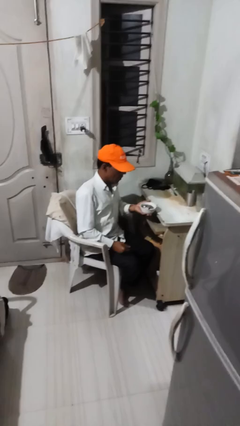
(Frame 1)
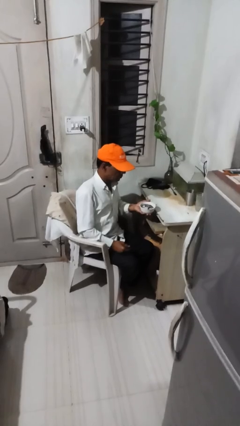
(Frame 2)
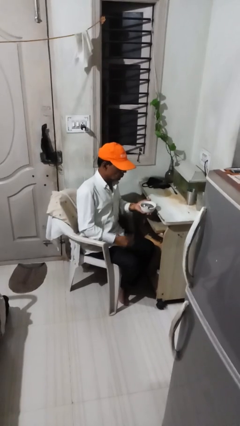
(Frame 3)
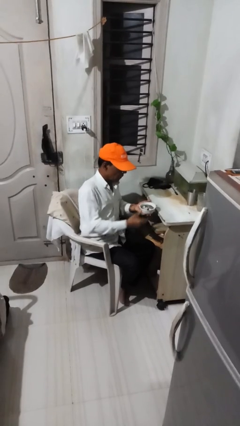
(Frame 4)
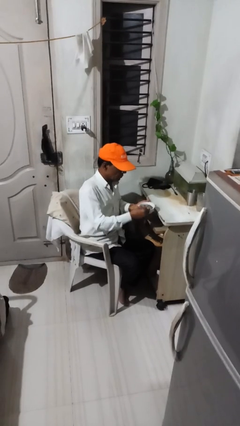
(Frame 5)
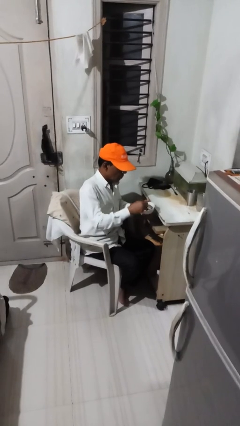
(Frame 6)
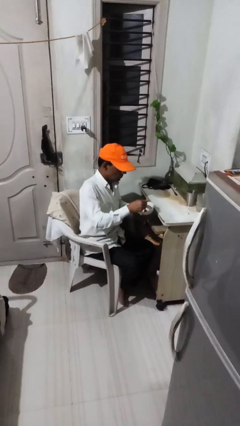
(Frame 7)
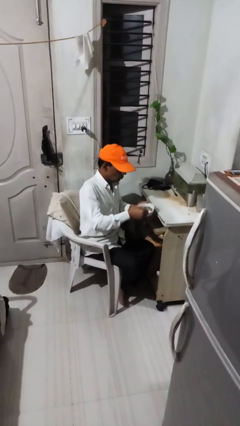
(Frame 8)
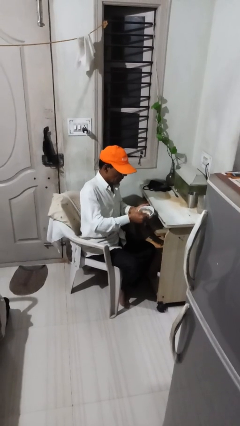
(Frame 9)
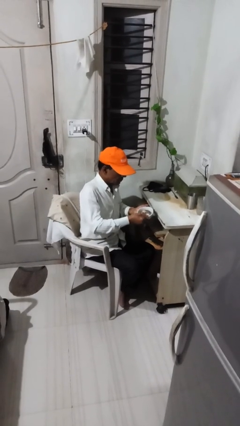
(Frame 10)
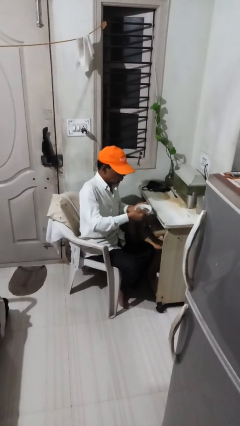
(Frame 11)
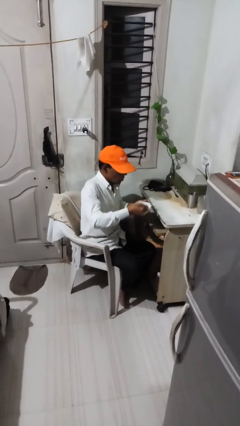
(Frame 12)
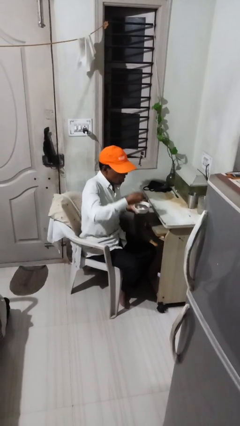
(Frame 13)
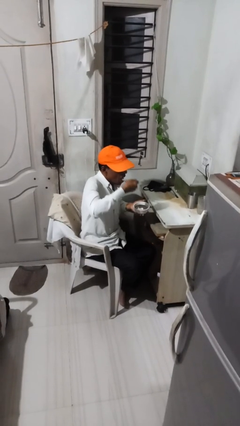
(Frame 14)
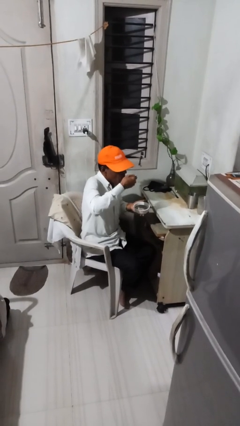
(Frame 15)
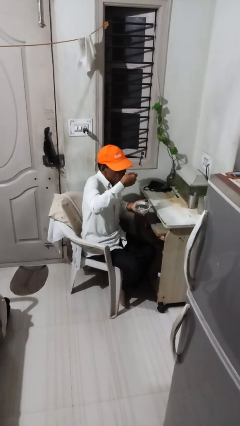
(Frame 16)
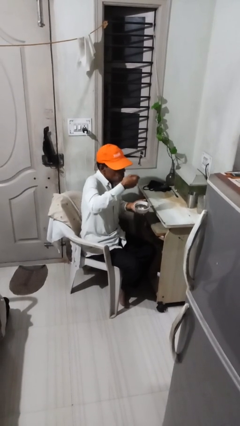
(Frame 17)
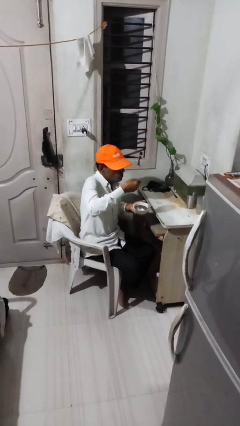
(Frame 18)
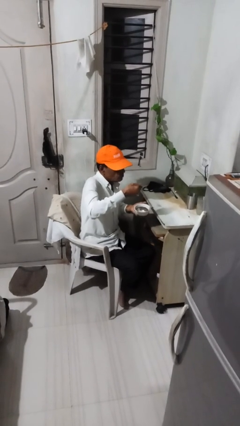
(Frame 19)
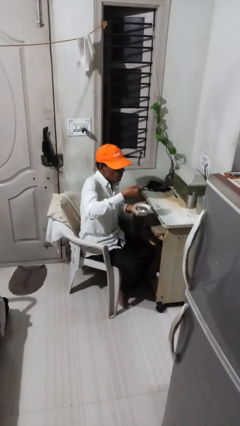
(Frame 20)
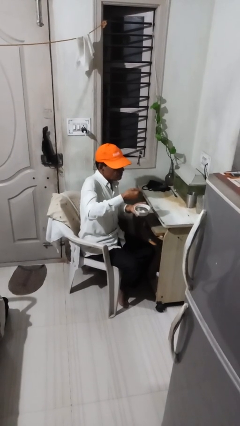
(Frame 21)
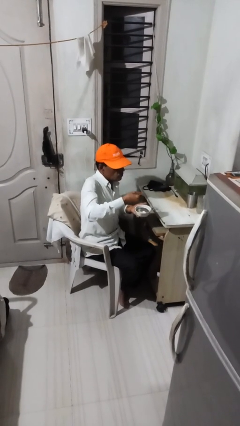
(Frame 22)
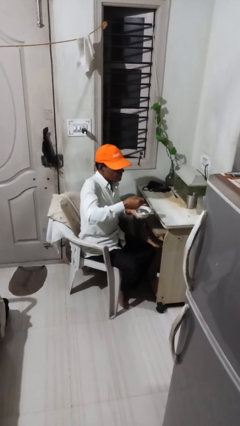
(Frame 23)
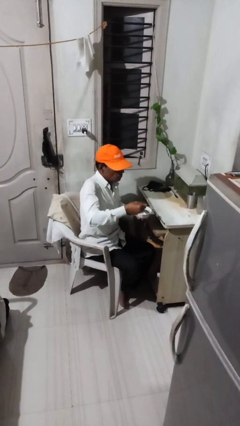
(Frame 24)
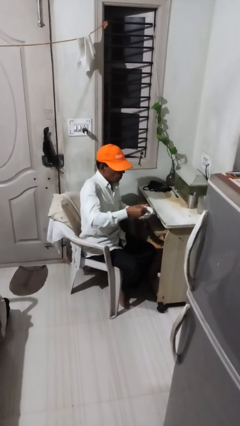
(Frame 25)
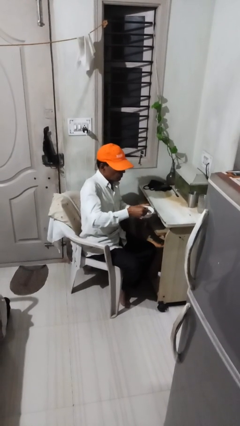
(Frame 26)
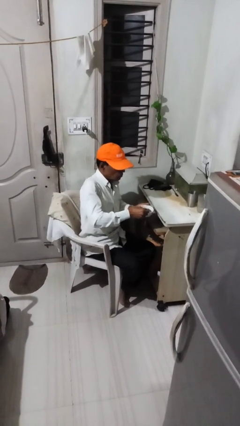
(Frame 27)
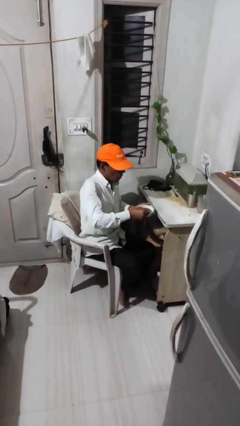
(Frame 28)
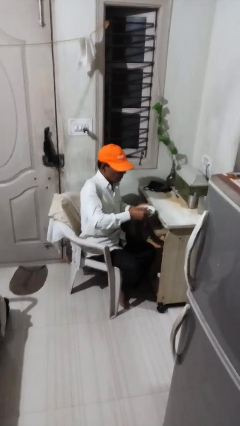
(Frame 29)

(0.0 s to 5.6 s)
person eats with utensil

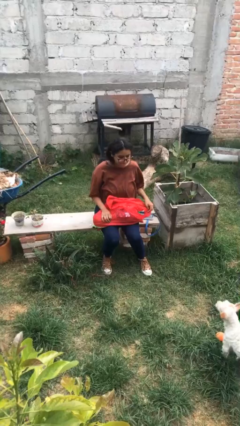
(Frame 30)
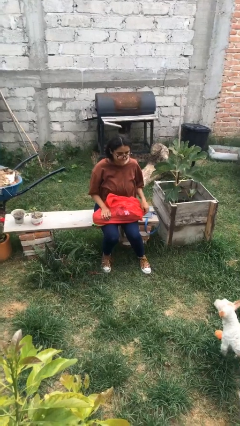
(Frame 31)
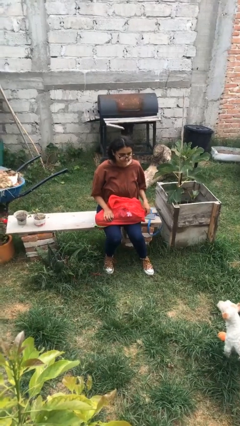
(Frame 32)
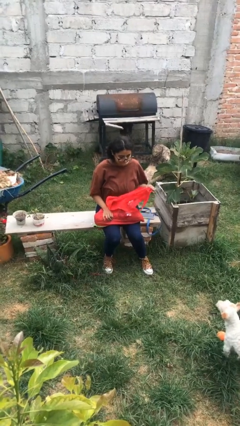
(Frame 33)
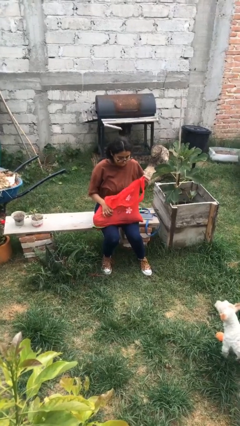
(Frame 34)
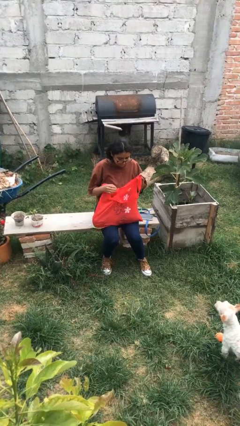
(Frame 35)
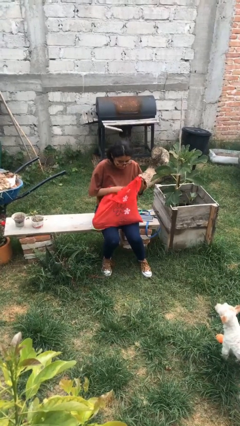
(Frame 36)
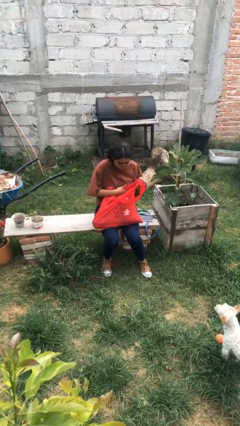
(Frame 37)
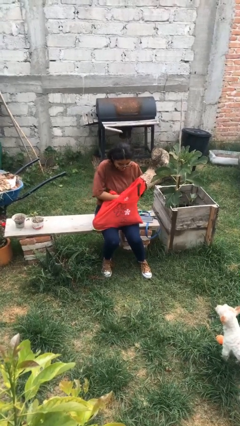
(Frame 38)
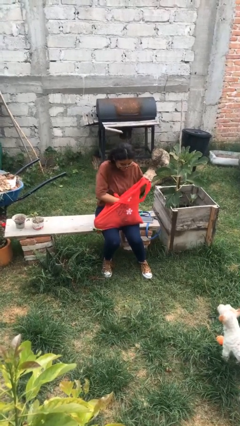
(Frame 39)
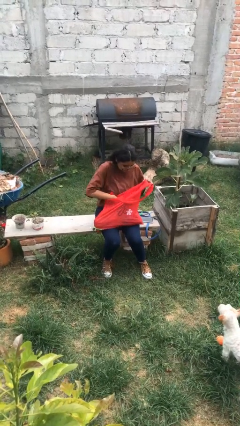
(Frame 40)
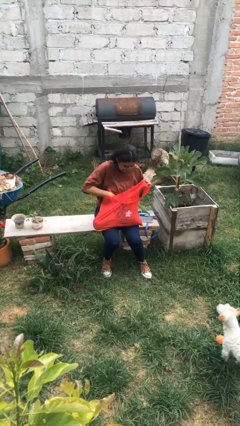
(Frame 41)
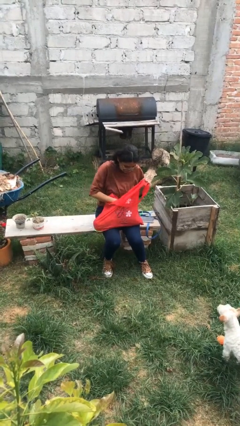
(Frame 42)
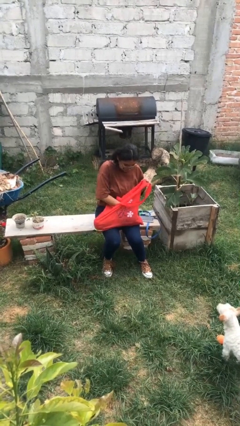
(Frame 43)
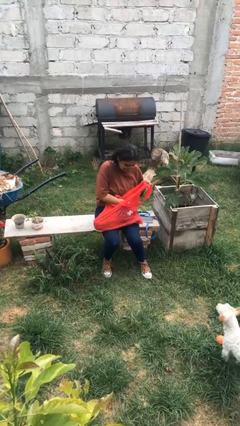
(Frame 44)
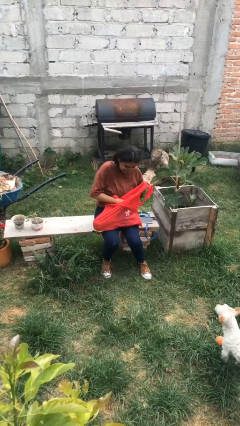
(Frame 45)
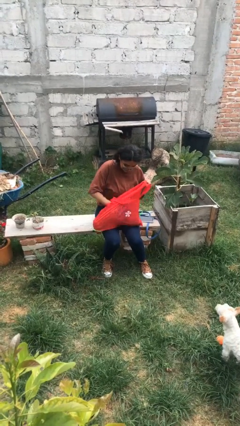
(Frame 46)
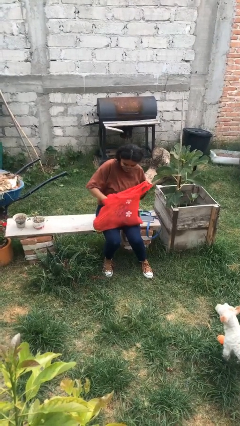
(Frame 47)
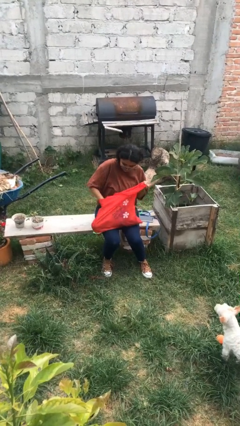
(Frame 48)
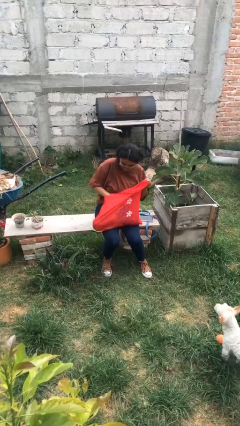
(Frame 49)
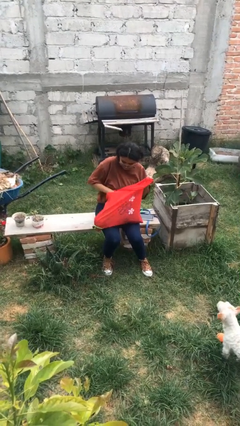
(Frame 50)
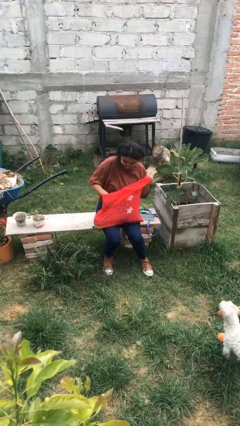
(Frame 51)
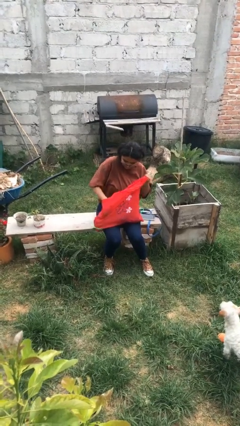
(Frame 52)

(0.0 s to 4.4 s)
person searches in bag

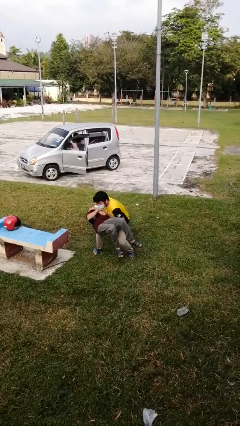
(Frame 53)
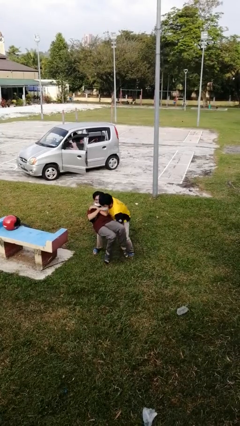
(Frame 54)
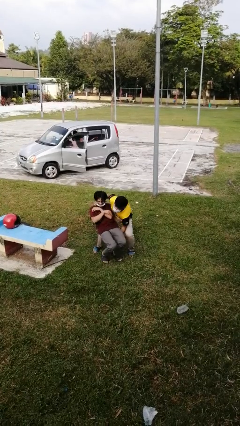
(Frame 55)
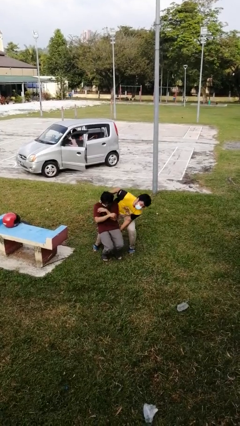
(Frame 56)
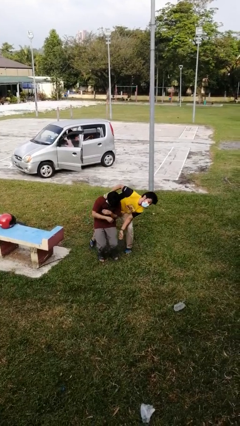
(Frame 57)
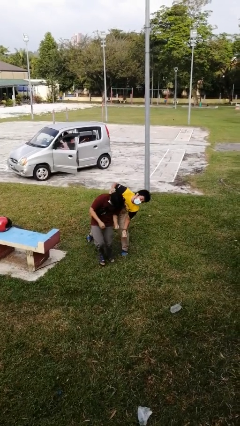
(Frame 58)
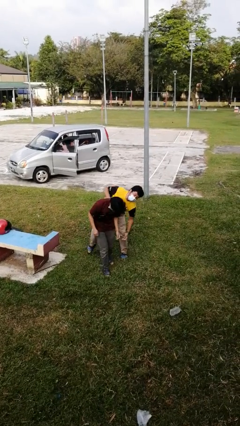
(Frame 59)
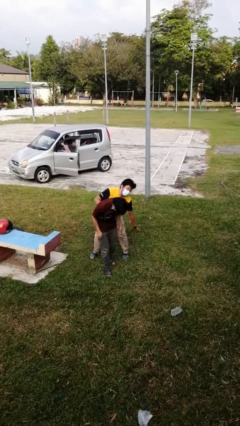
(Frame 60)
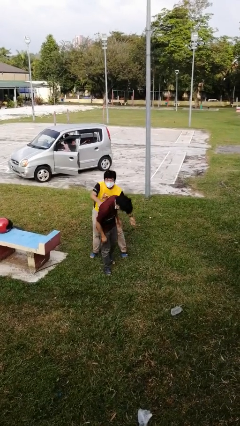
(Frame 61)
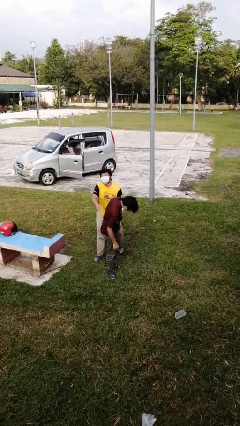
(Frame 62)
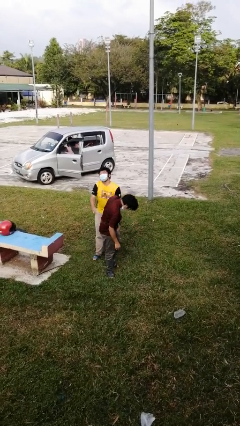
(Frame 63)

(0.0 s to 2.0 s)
person puts down person

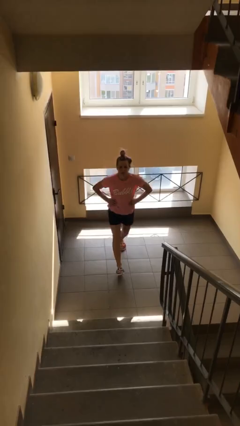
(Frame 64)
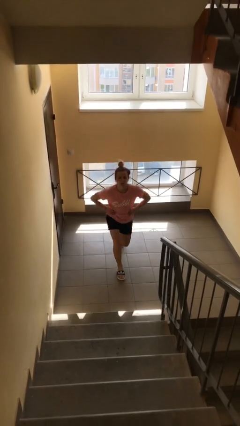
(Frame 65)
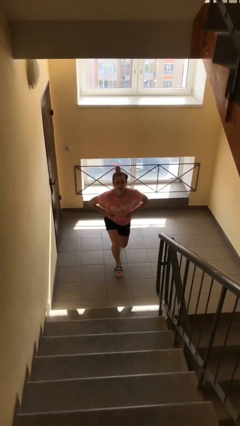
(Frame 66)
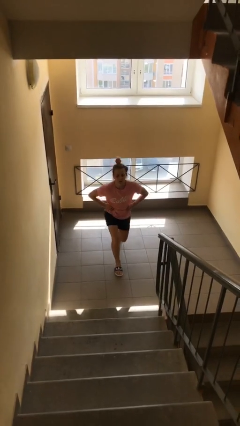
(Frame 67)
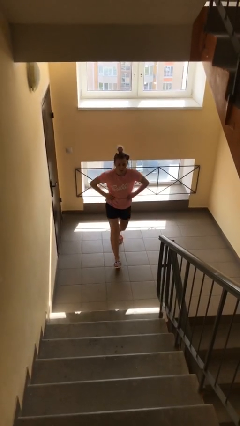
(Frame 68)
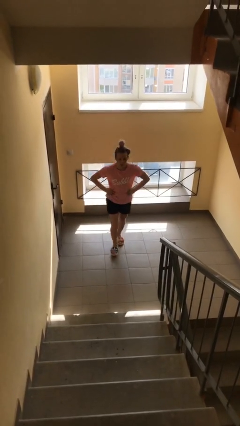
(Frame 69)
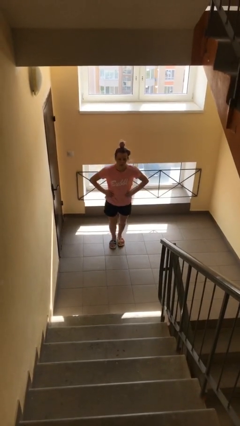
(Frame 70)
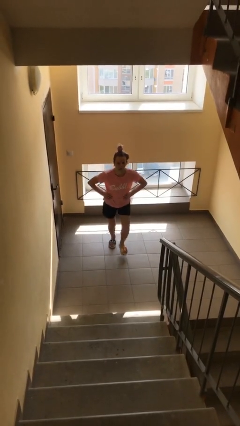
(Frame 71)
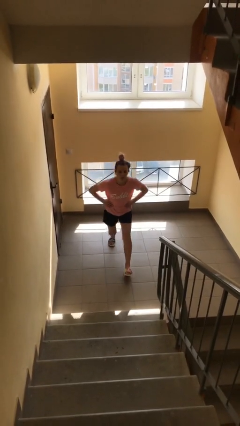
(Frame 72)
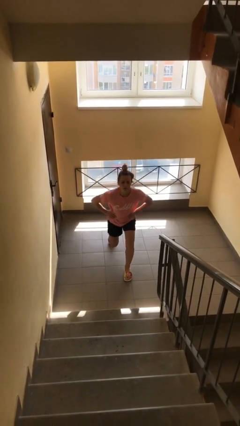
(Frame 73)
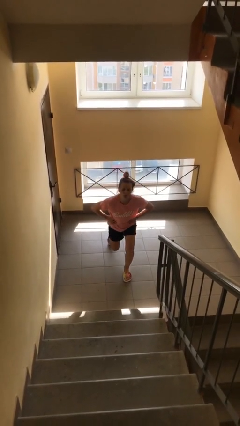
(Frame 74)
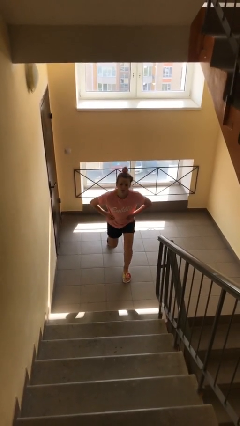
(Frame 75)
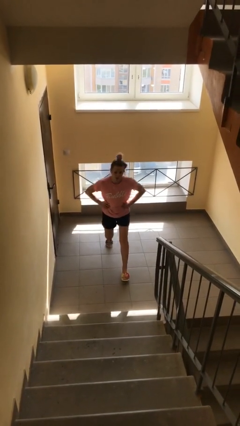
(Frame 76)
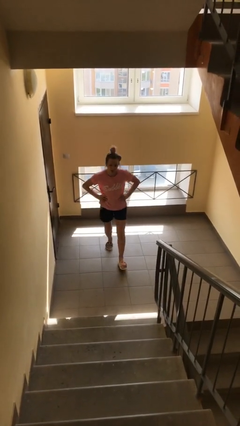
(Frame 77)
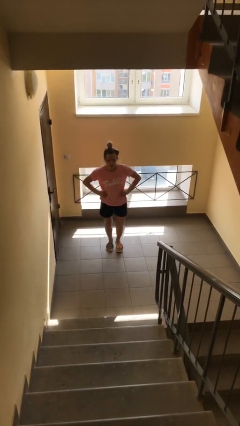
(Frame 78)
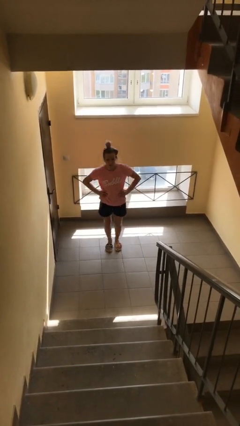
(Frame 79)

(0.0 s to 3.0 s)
person exercises with lunges

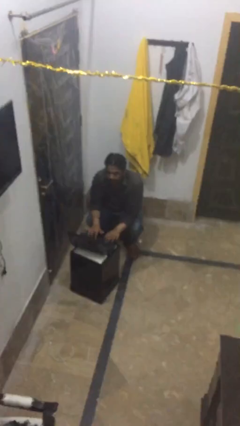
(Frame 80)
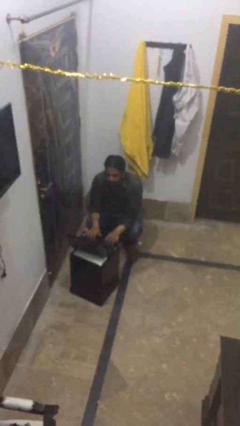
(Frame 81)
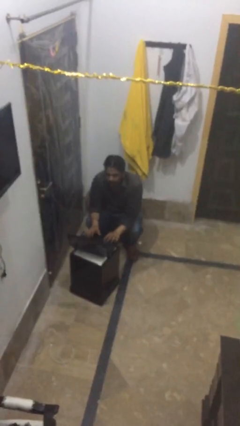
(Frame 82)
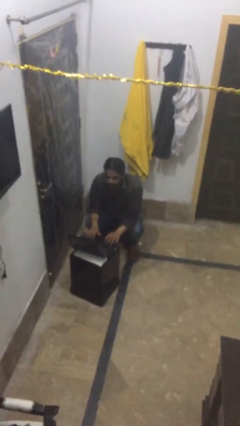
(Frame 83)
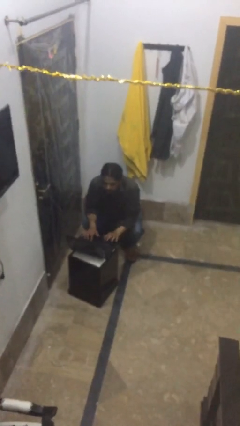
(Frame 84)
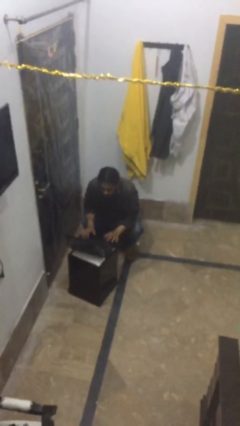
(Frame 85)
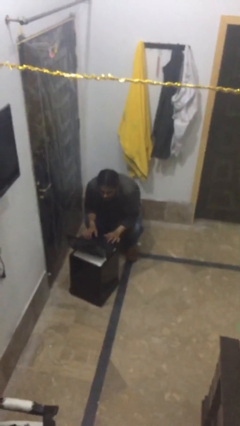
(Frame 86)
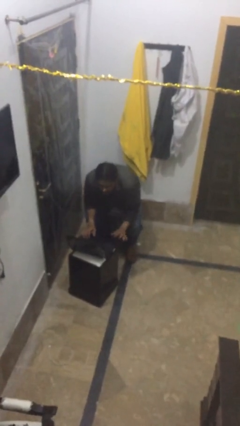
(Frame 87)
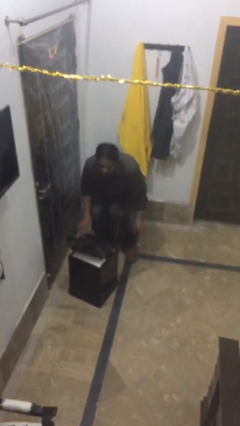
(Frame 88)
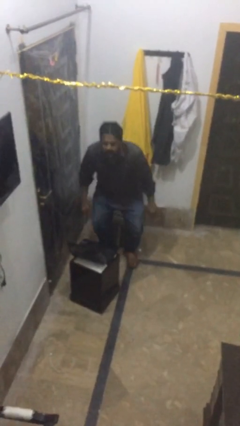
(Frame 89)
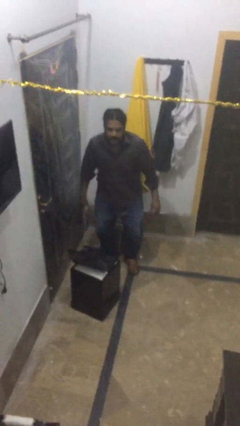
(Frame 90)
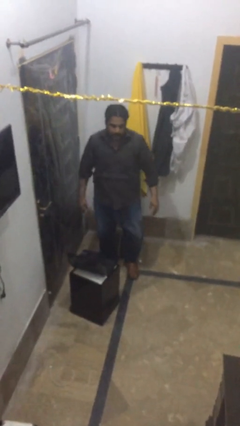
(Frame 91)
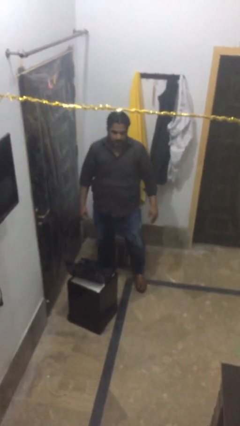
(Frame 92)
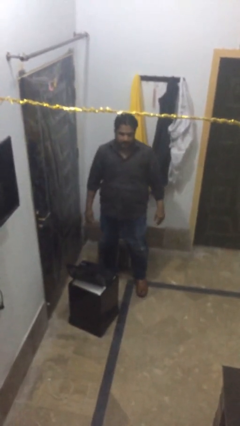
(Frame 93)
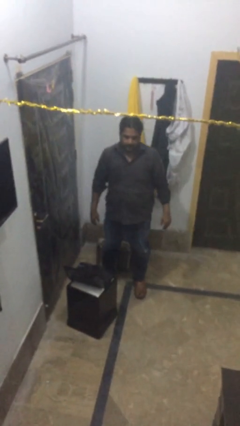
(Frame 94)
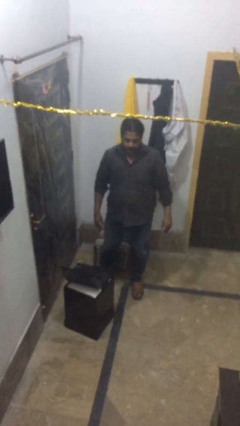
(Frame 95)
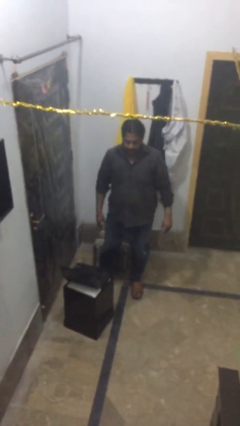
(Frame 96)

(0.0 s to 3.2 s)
person stands up
